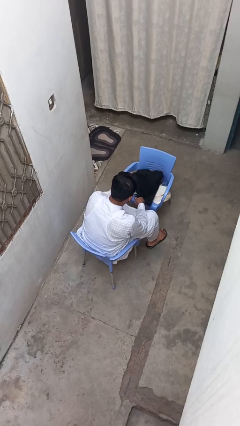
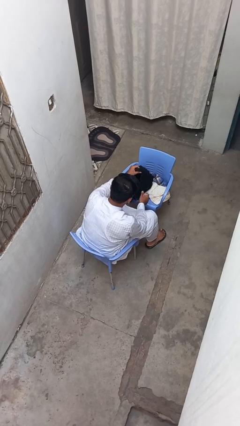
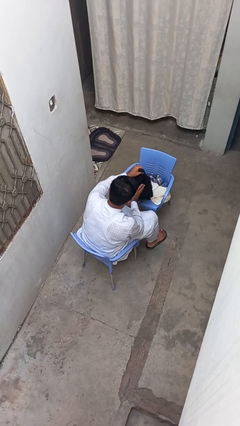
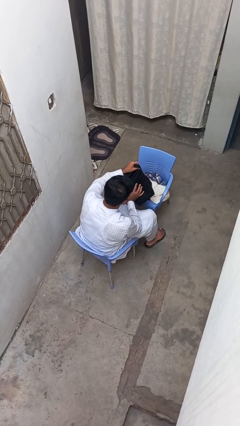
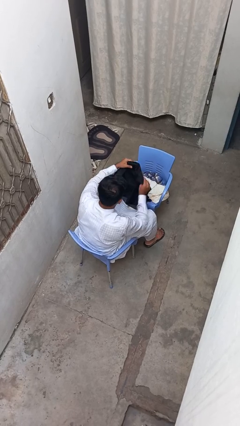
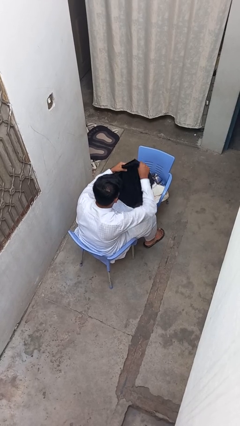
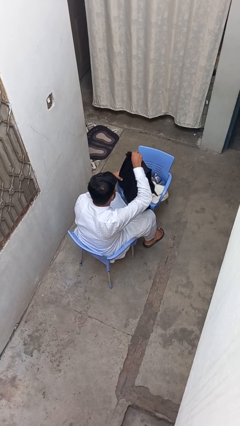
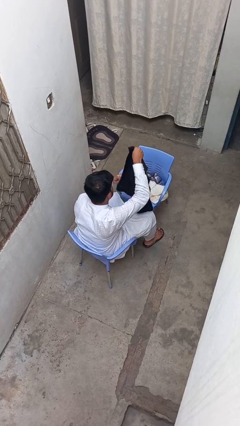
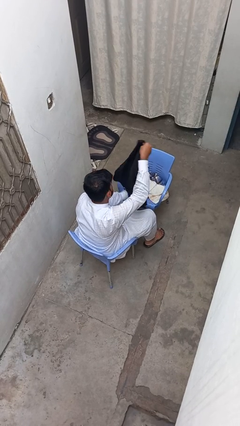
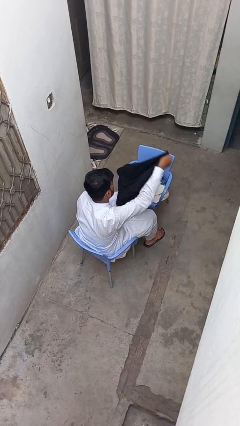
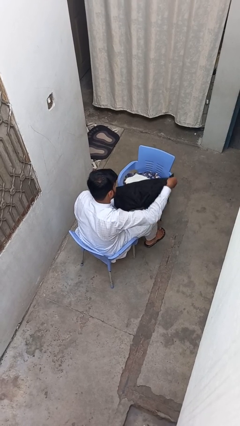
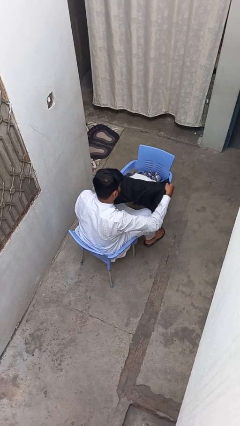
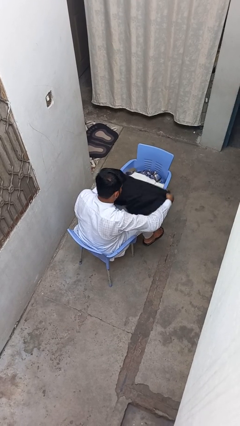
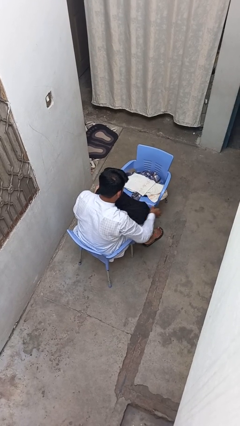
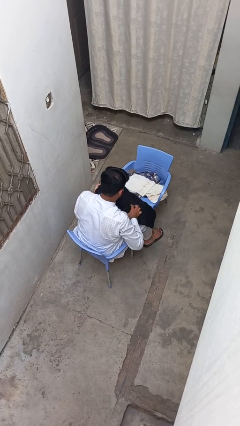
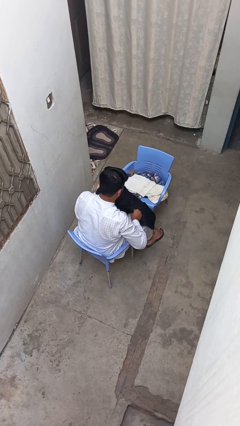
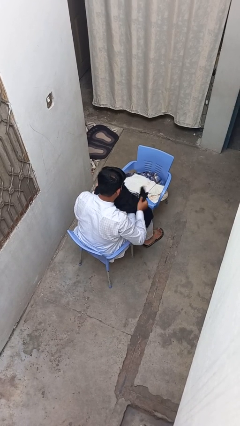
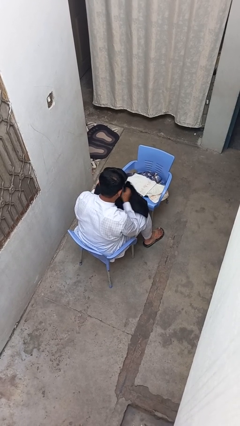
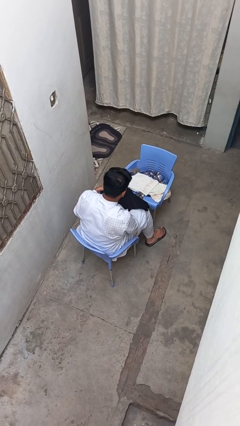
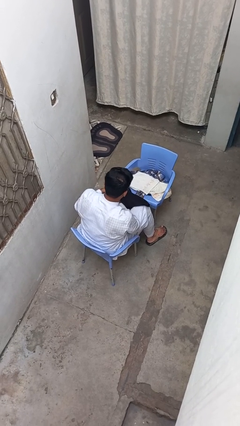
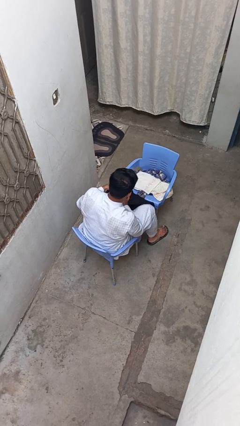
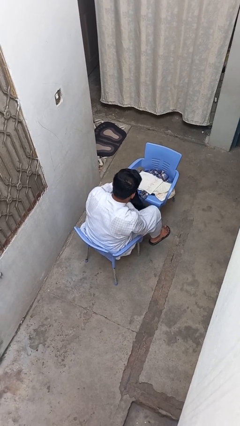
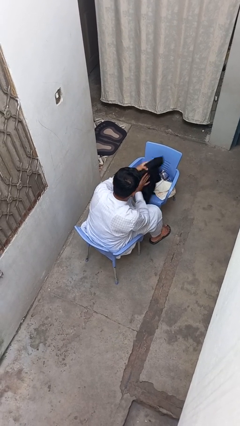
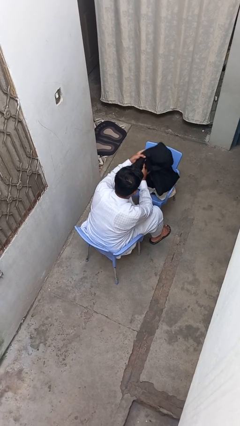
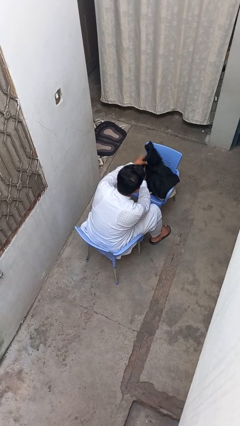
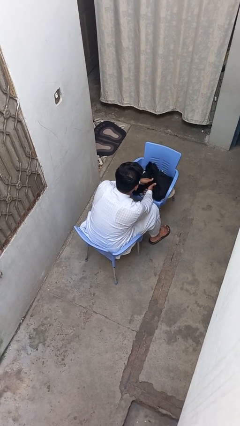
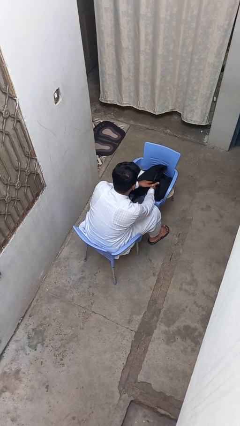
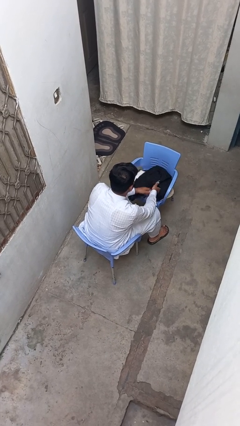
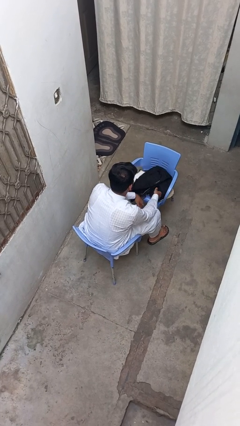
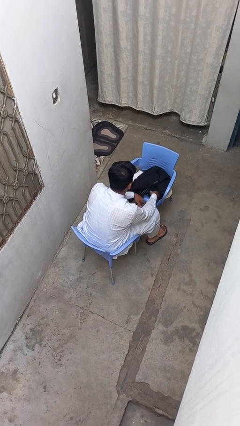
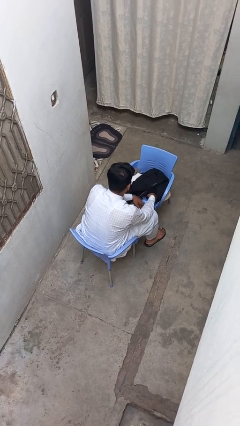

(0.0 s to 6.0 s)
person folds pants

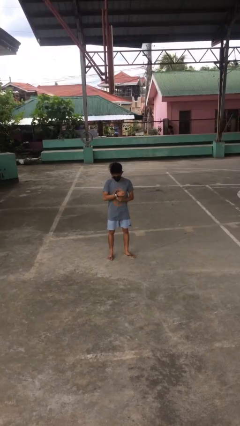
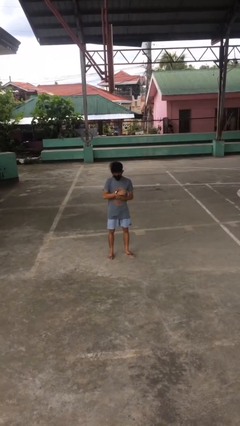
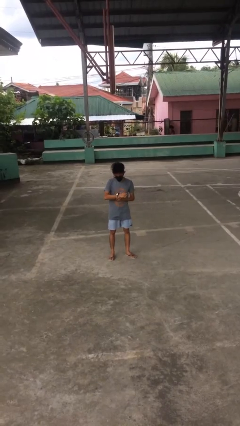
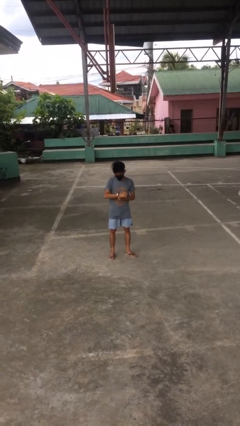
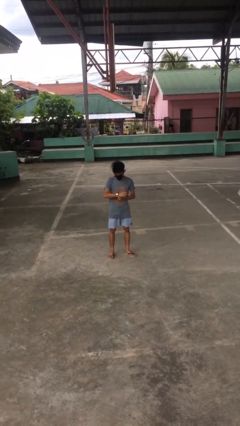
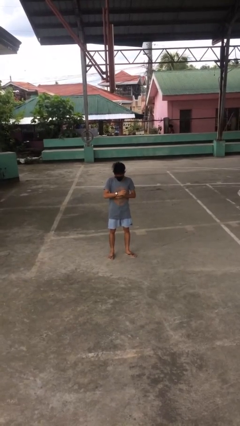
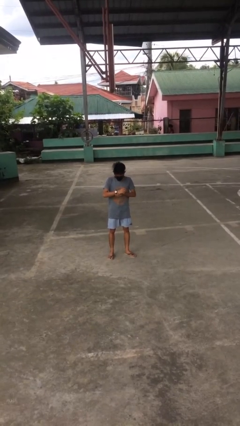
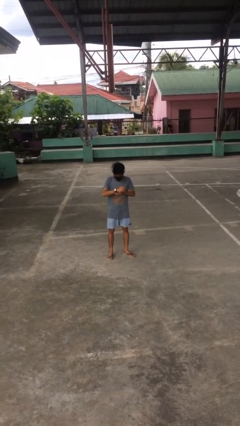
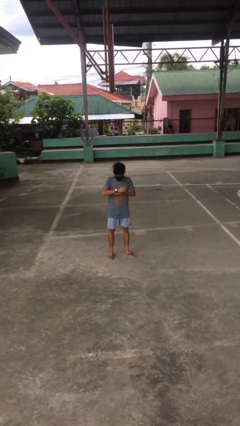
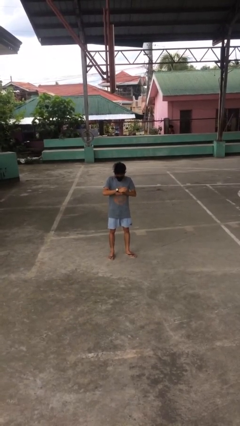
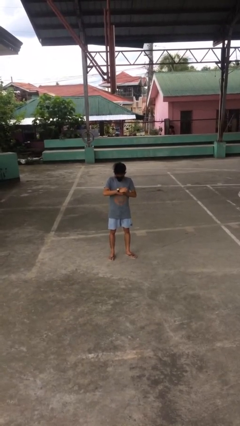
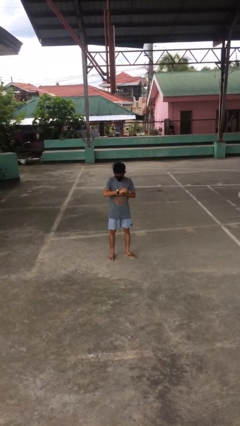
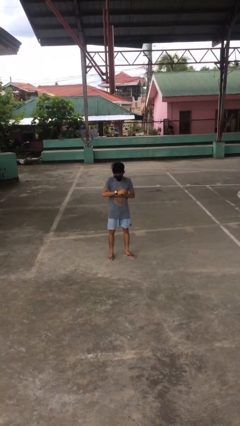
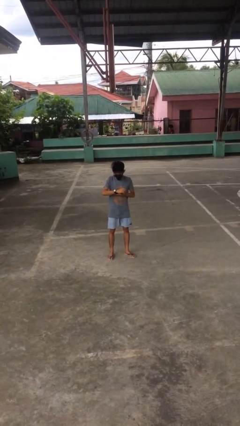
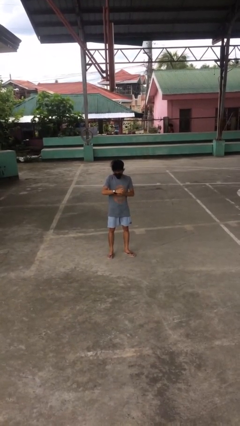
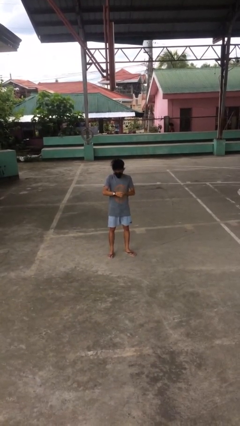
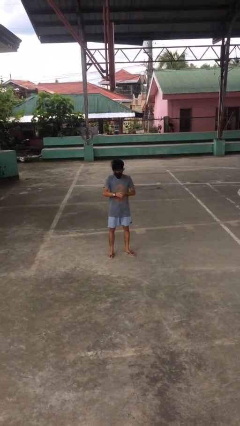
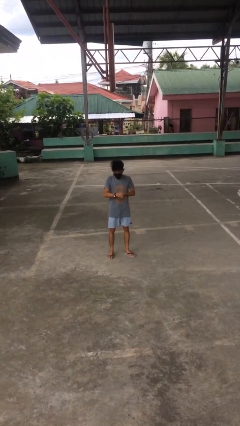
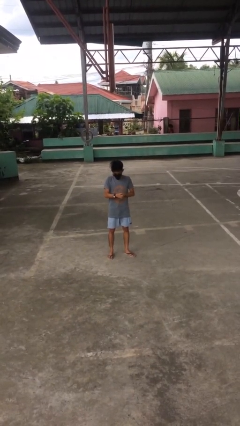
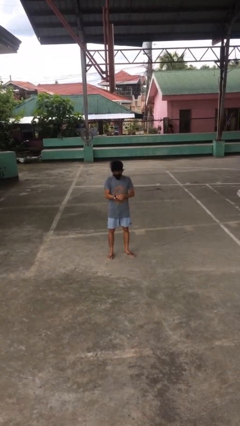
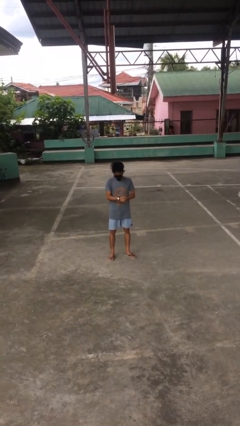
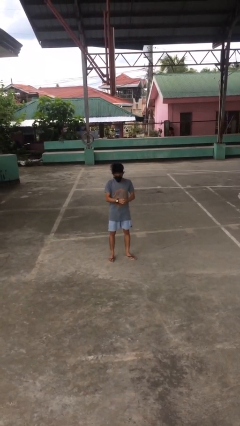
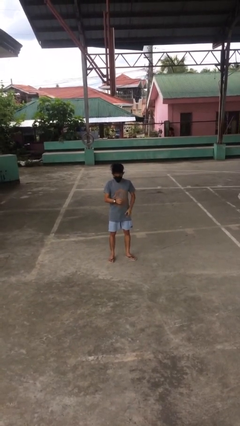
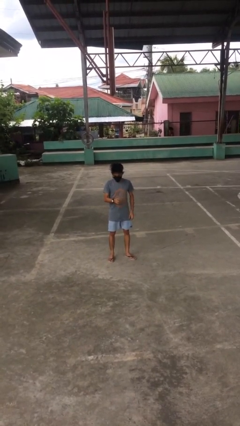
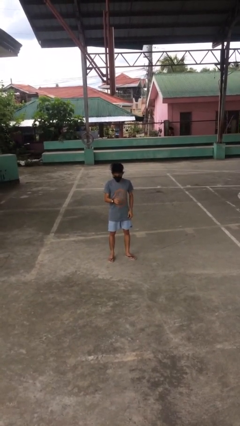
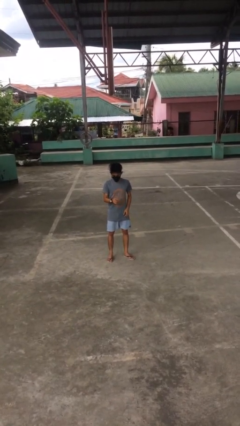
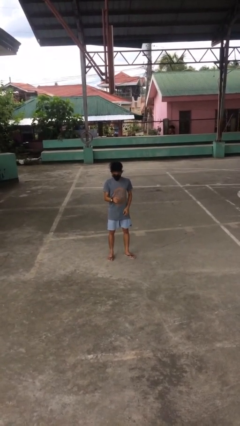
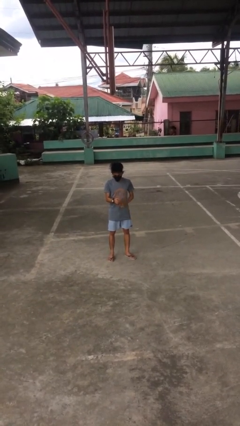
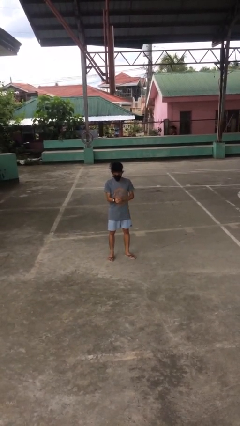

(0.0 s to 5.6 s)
person puts on wristwatch

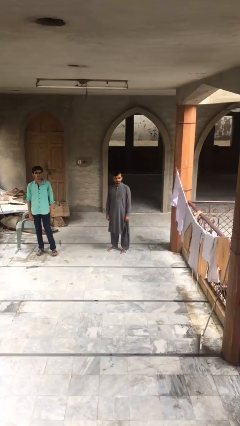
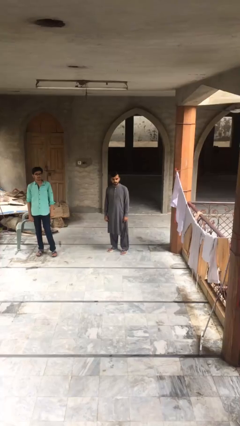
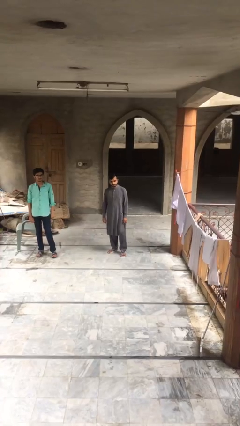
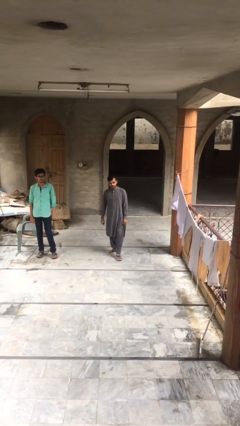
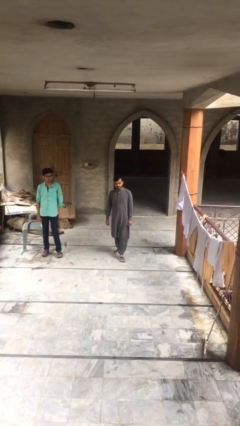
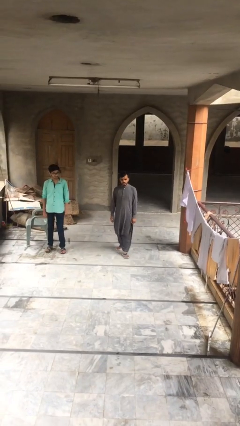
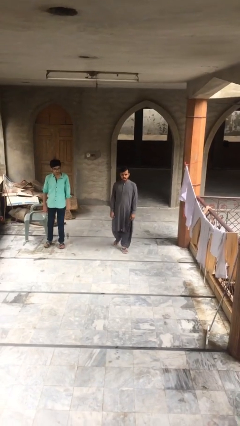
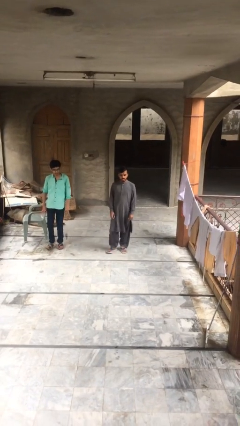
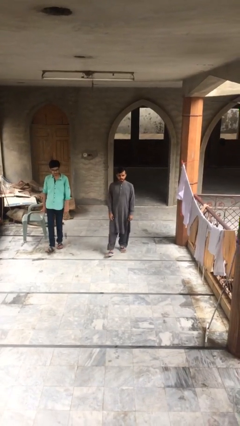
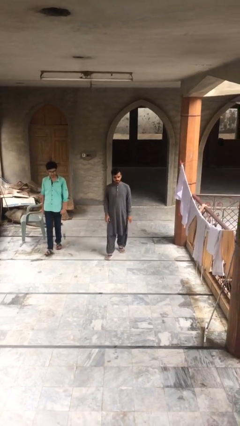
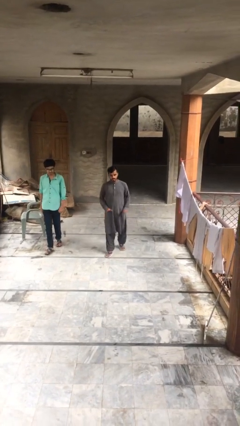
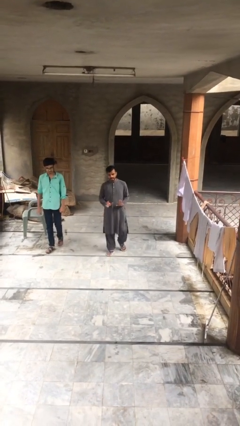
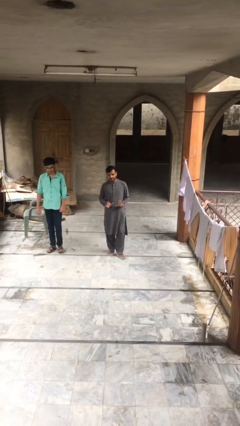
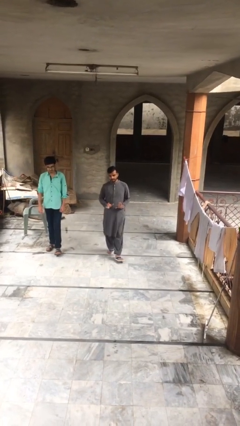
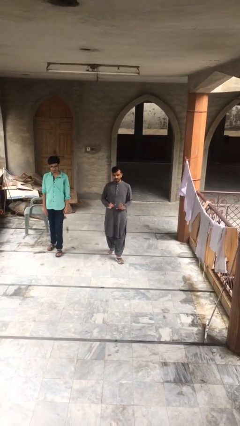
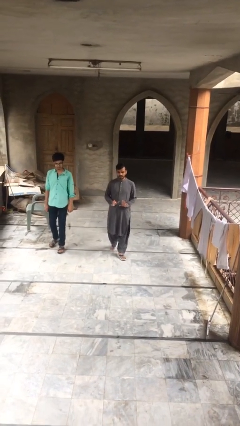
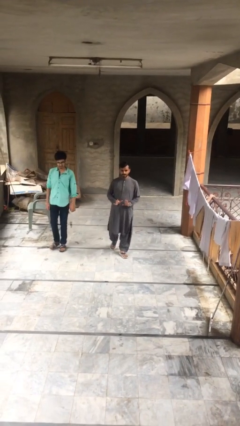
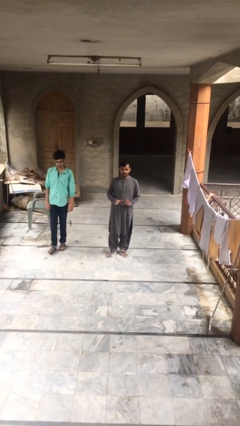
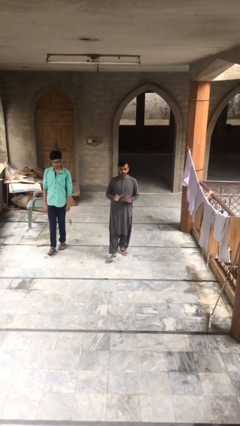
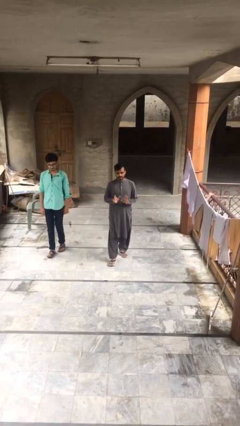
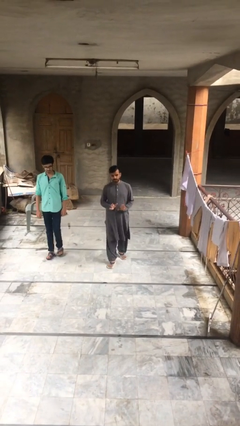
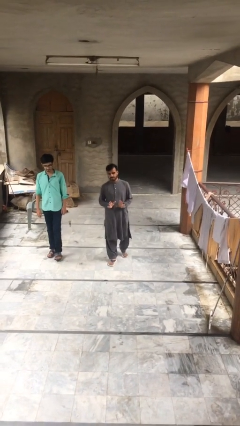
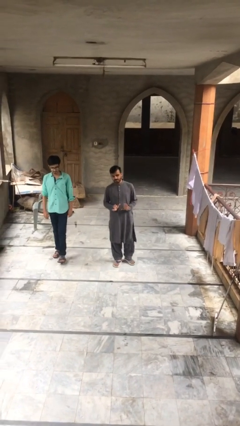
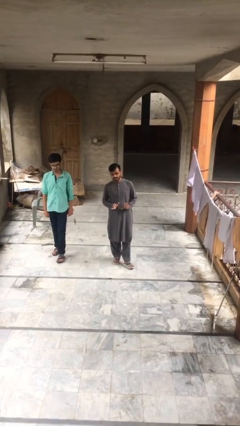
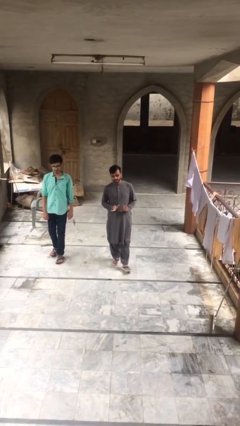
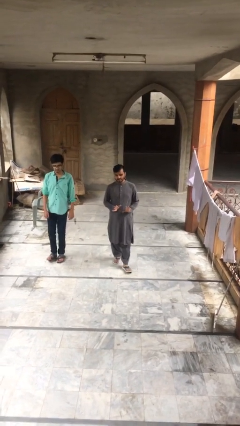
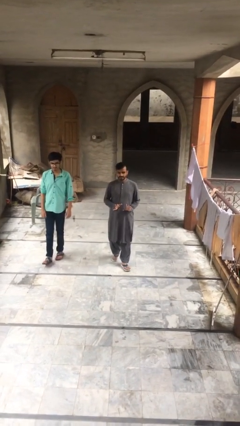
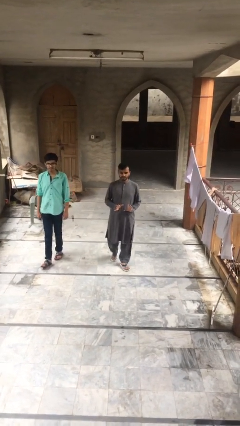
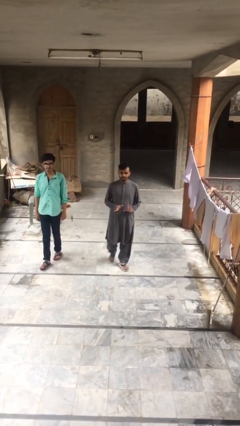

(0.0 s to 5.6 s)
person talks to person

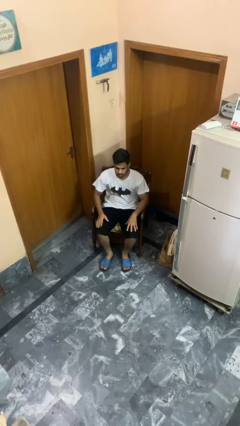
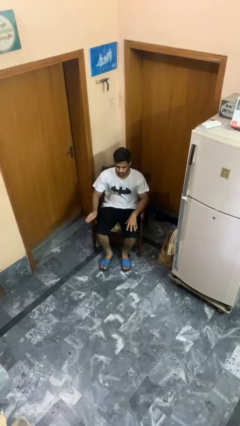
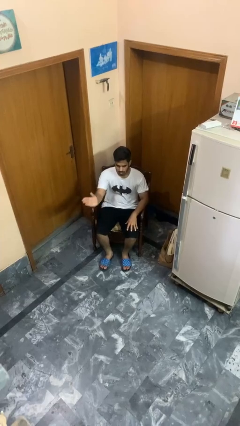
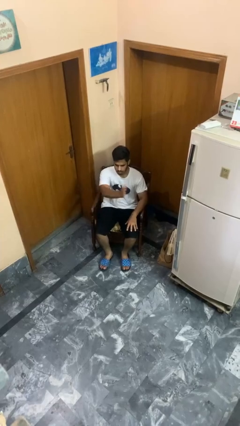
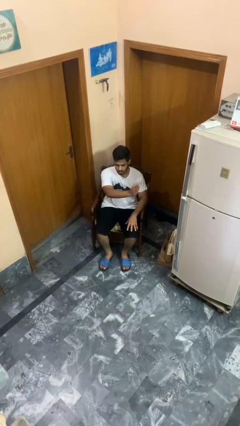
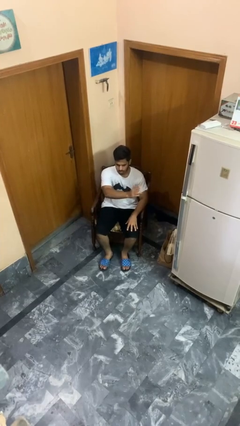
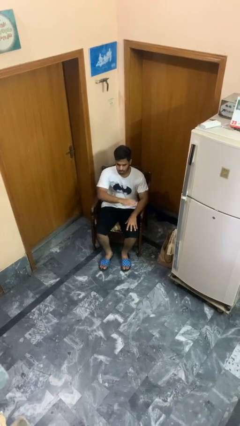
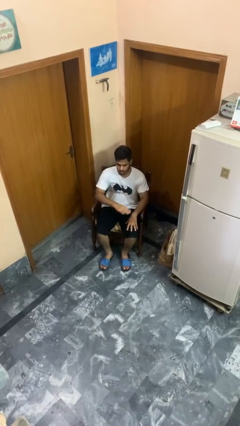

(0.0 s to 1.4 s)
person gestures swipe left
